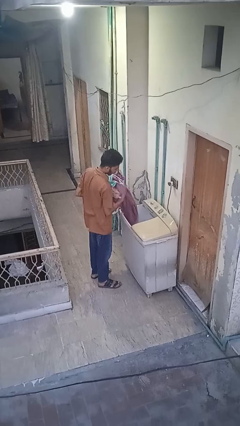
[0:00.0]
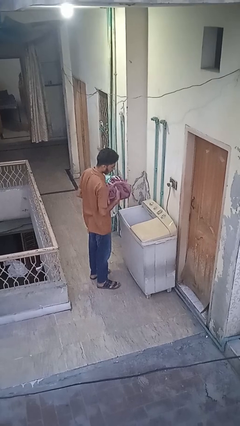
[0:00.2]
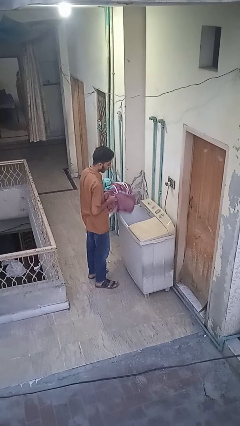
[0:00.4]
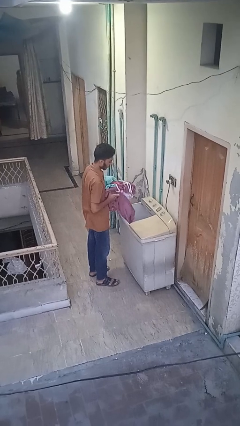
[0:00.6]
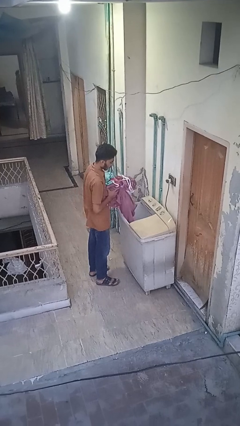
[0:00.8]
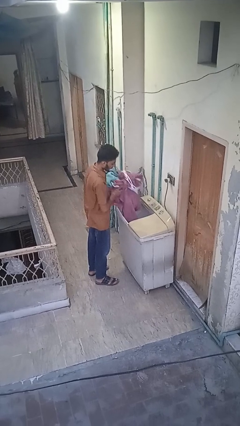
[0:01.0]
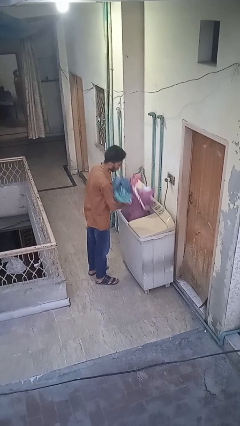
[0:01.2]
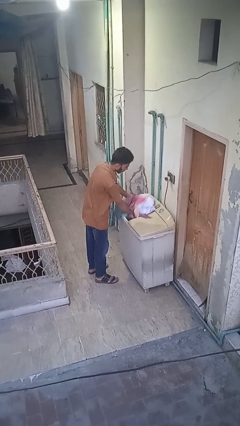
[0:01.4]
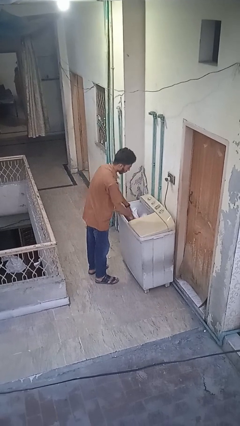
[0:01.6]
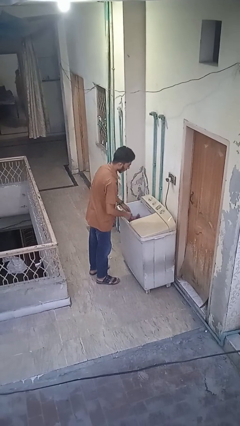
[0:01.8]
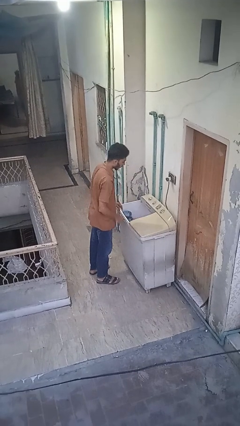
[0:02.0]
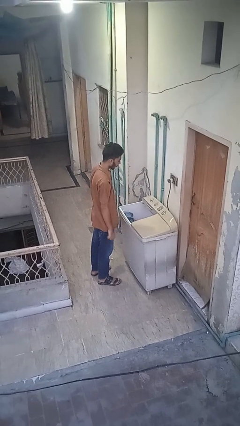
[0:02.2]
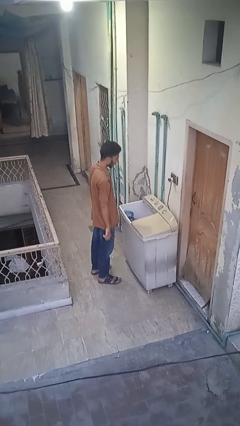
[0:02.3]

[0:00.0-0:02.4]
person loads clotheswasher

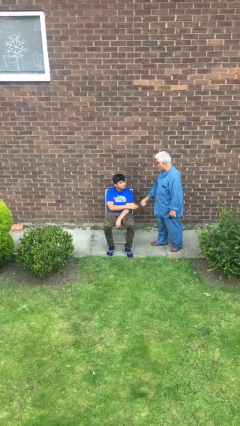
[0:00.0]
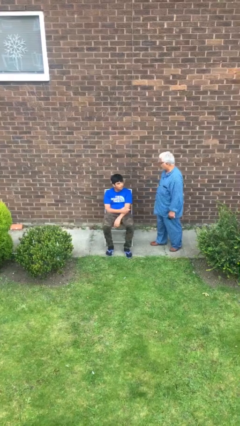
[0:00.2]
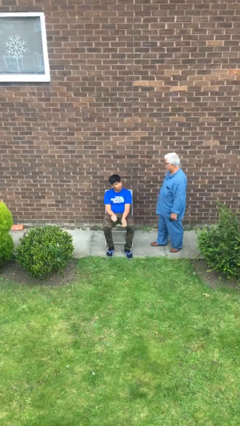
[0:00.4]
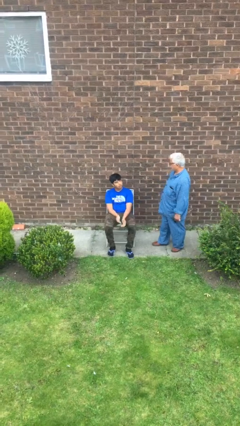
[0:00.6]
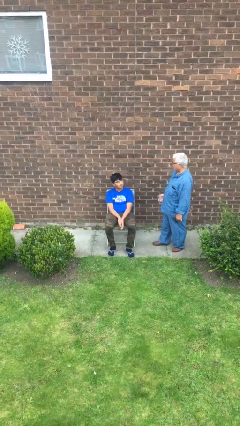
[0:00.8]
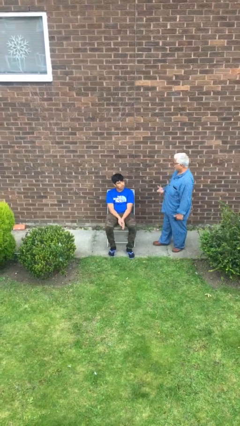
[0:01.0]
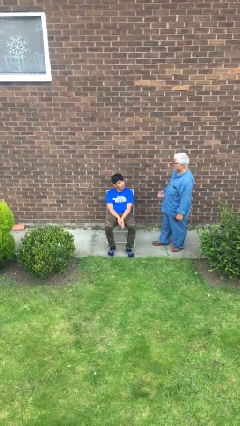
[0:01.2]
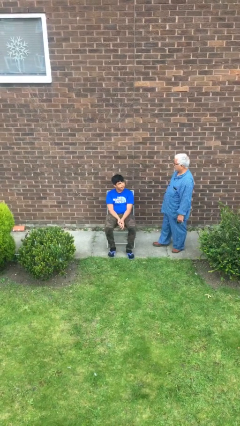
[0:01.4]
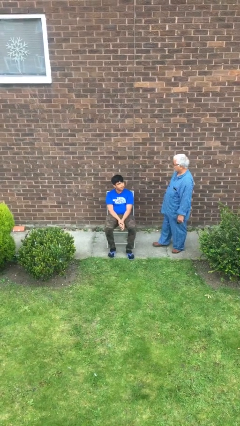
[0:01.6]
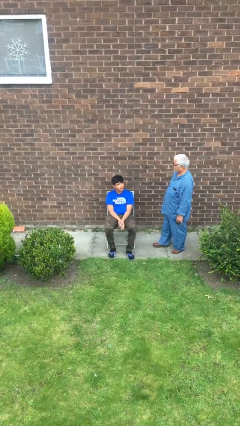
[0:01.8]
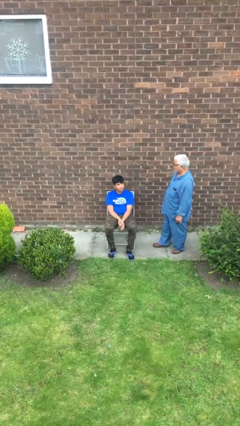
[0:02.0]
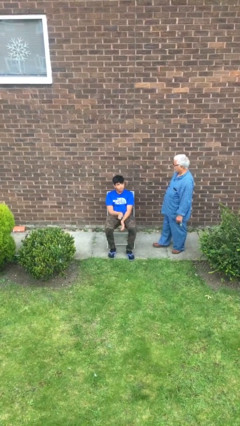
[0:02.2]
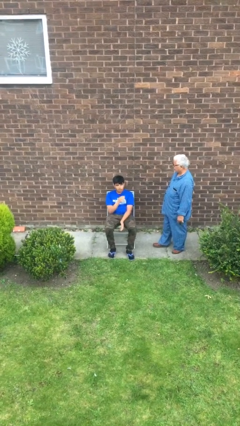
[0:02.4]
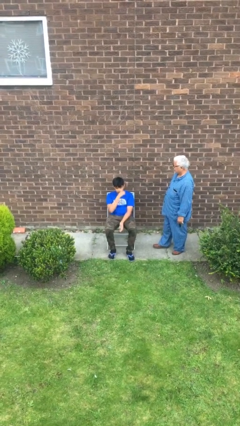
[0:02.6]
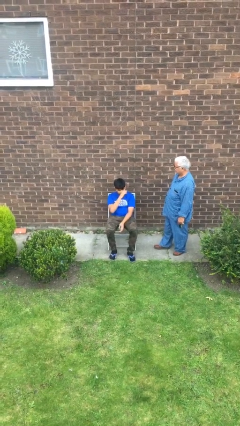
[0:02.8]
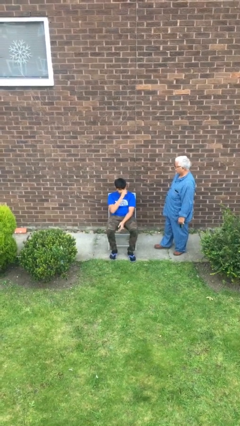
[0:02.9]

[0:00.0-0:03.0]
person talks to person

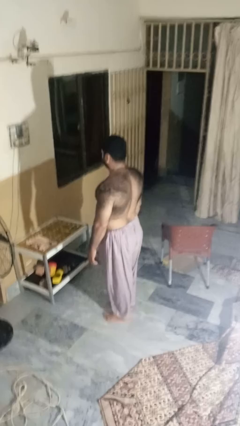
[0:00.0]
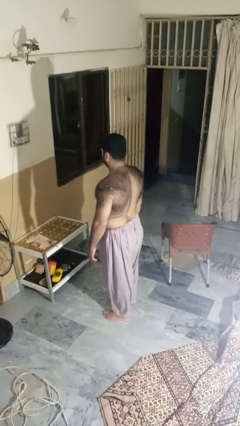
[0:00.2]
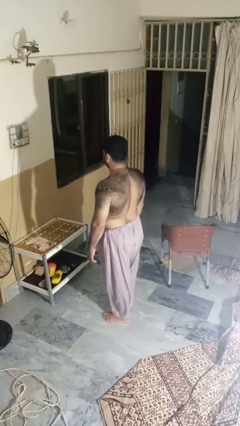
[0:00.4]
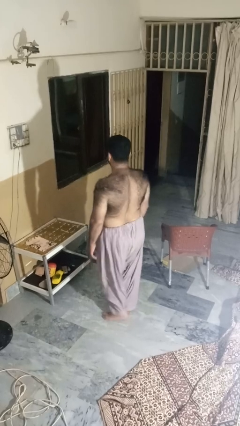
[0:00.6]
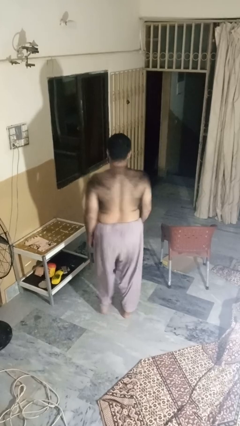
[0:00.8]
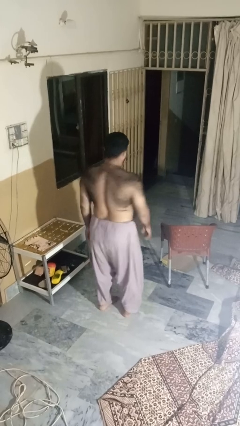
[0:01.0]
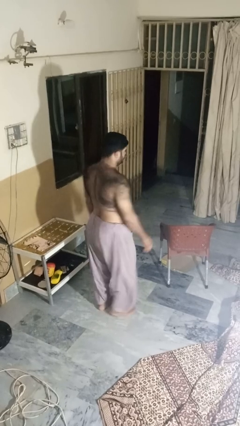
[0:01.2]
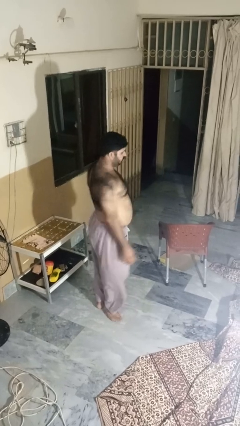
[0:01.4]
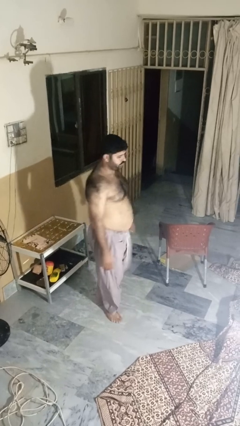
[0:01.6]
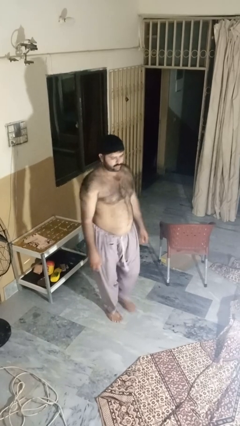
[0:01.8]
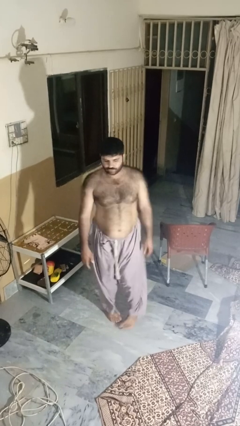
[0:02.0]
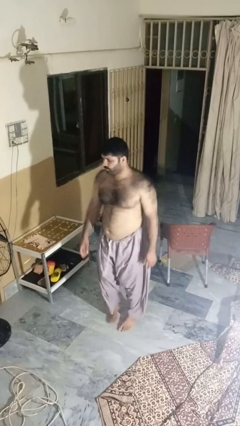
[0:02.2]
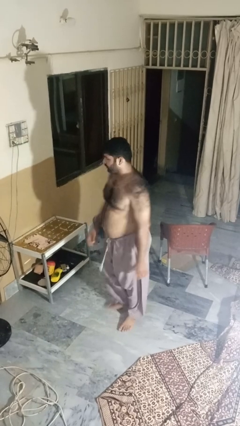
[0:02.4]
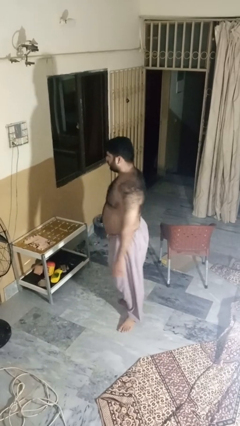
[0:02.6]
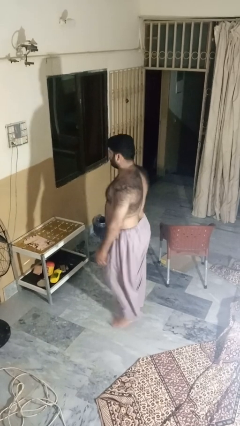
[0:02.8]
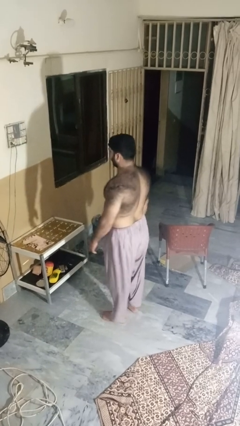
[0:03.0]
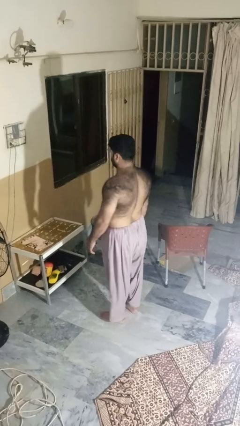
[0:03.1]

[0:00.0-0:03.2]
person twirls

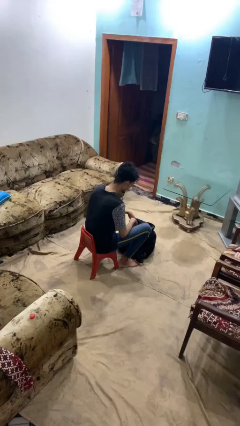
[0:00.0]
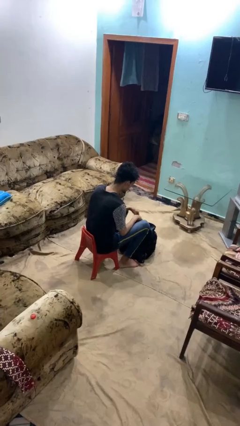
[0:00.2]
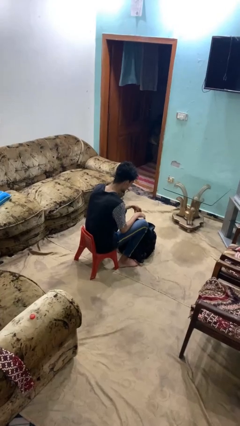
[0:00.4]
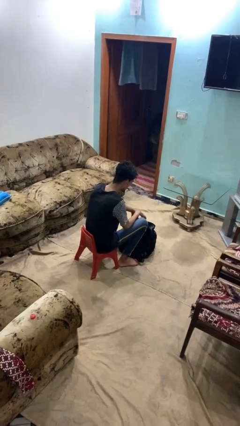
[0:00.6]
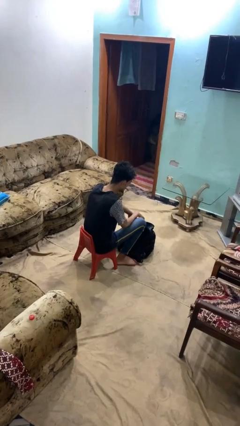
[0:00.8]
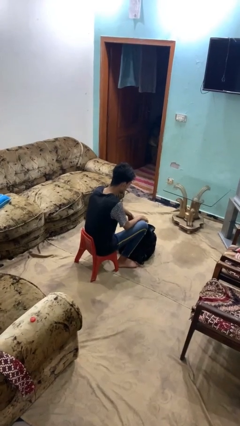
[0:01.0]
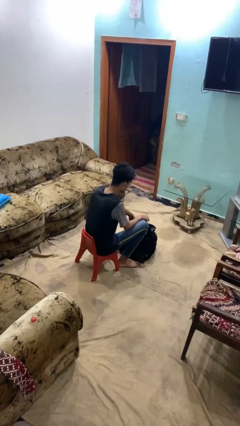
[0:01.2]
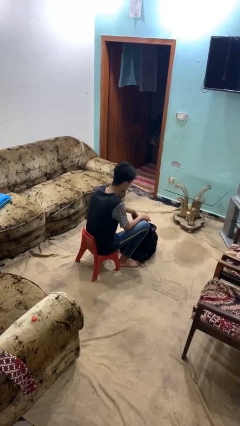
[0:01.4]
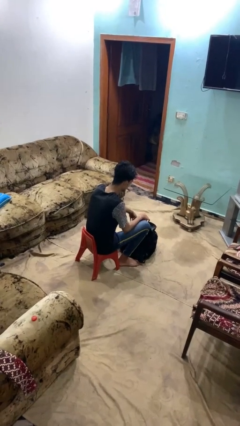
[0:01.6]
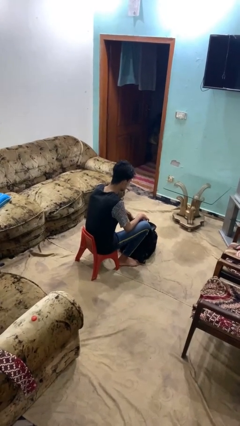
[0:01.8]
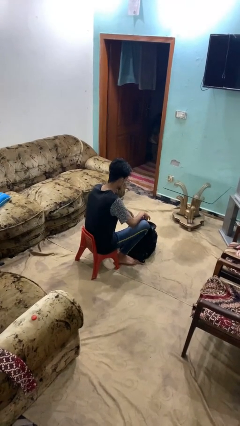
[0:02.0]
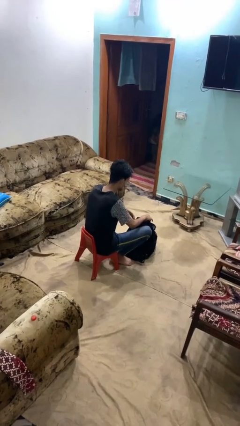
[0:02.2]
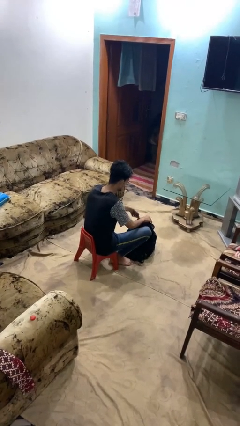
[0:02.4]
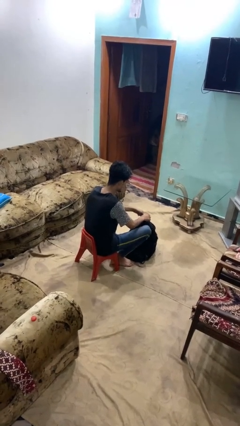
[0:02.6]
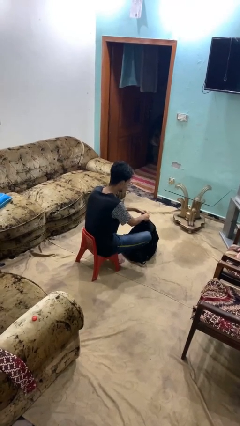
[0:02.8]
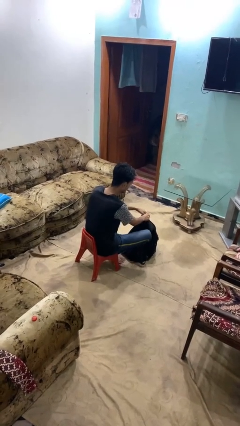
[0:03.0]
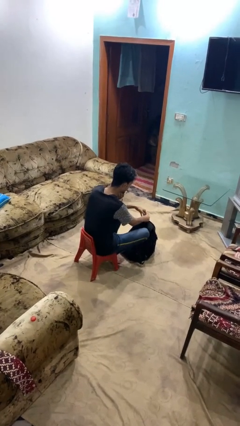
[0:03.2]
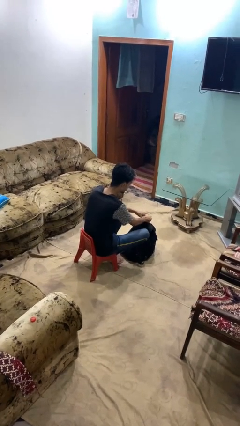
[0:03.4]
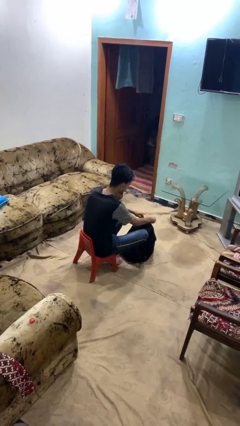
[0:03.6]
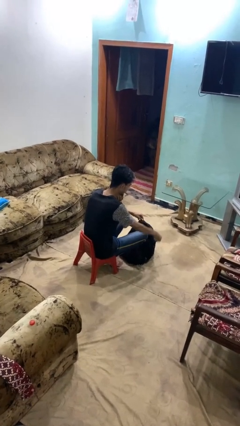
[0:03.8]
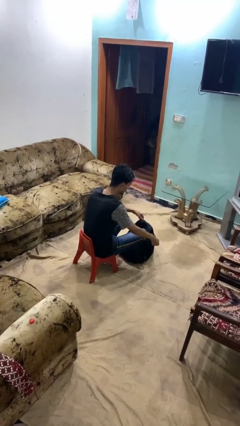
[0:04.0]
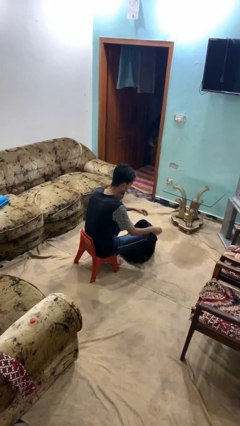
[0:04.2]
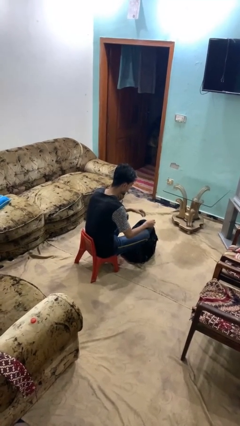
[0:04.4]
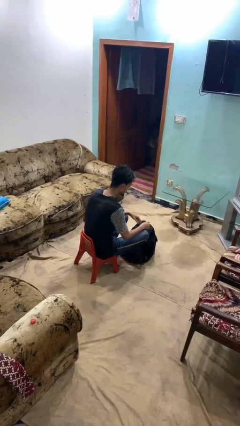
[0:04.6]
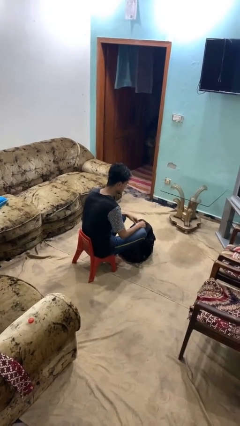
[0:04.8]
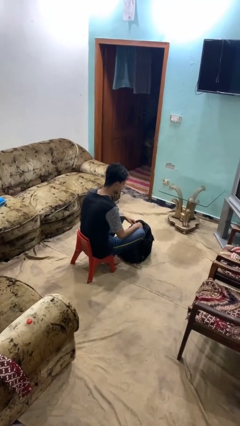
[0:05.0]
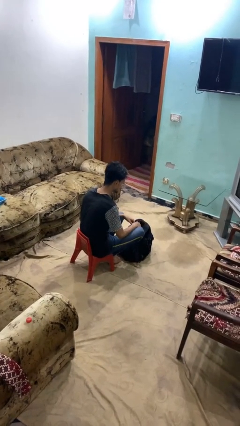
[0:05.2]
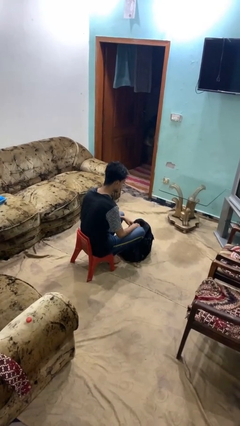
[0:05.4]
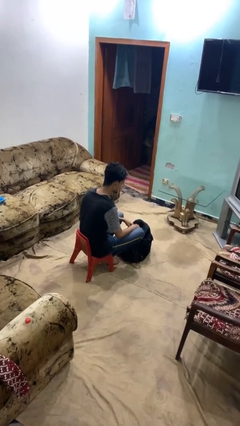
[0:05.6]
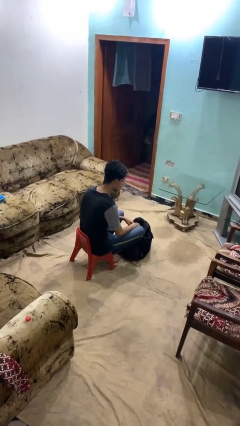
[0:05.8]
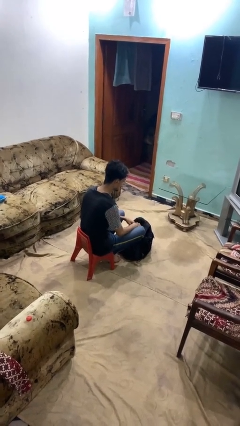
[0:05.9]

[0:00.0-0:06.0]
person takes off backpack

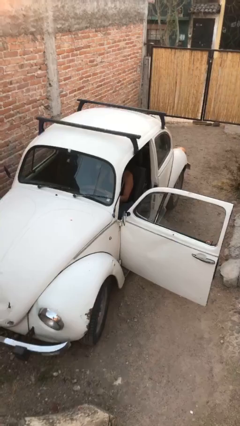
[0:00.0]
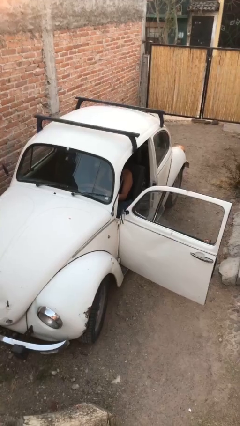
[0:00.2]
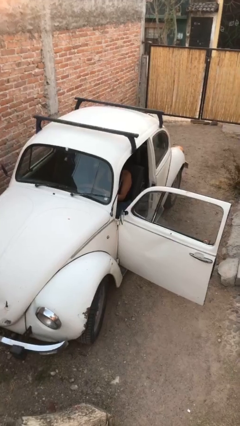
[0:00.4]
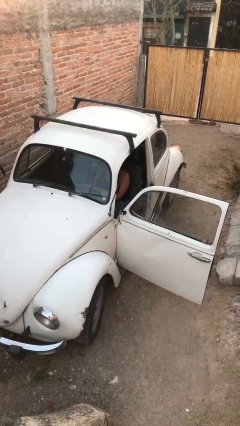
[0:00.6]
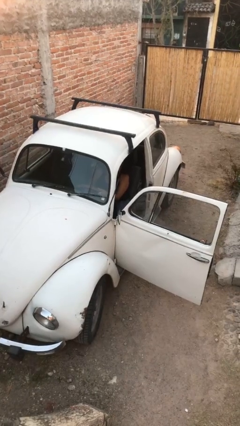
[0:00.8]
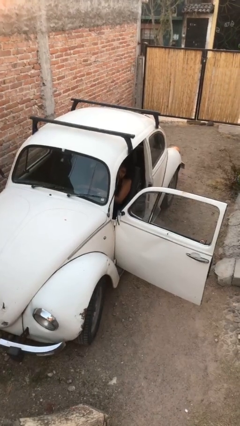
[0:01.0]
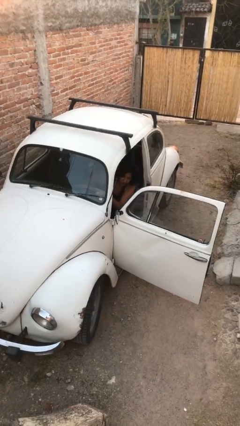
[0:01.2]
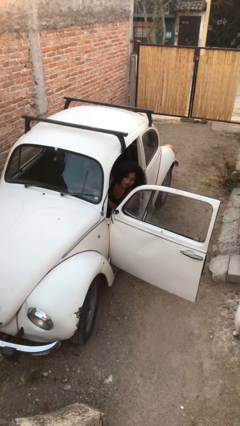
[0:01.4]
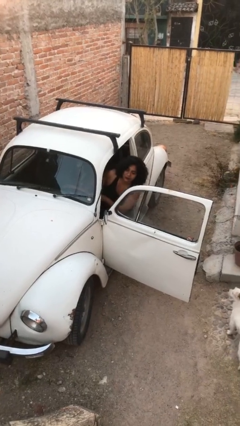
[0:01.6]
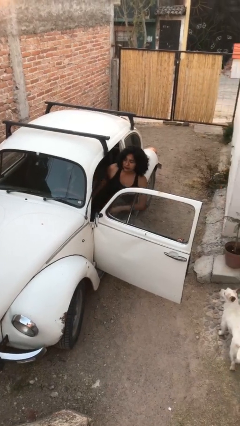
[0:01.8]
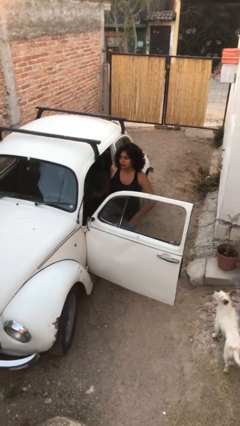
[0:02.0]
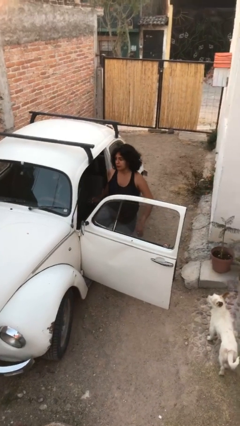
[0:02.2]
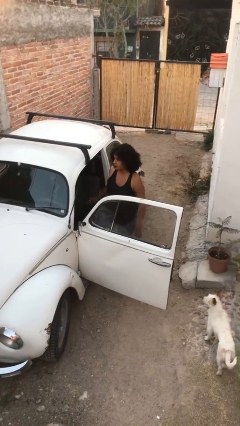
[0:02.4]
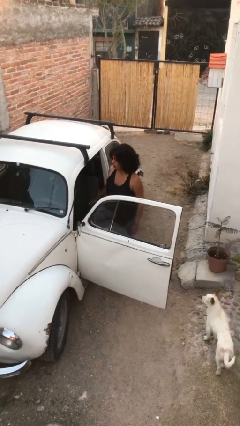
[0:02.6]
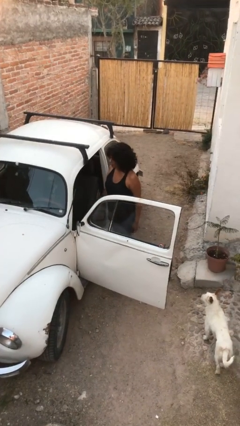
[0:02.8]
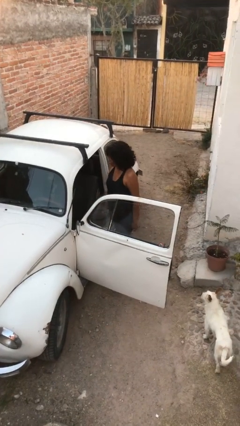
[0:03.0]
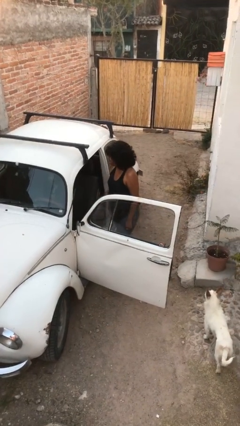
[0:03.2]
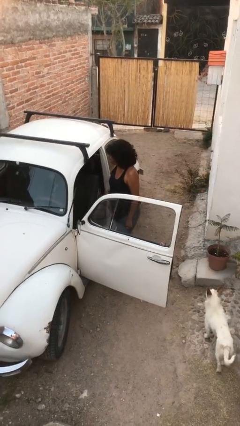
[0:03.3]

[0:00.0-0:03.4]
person exits car
